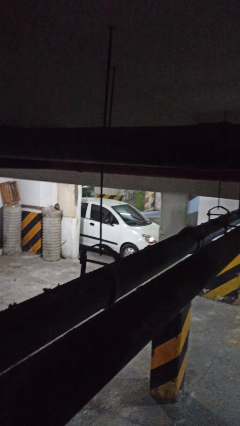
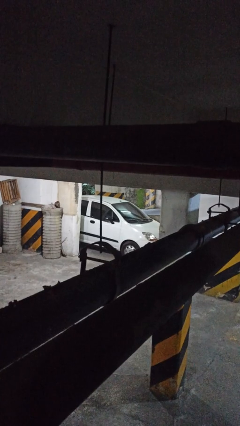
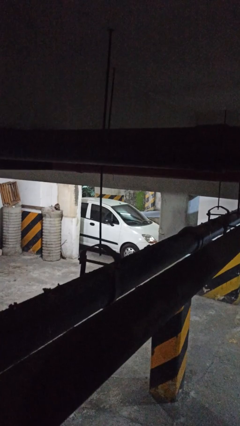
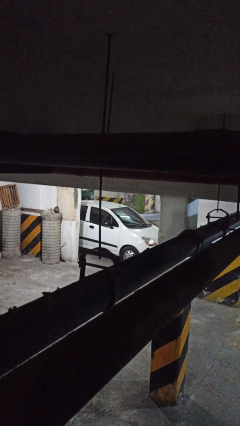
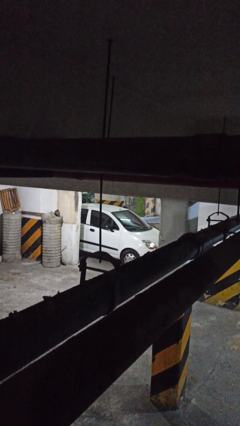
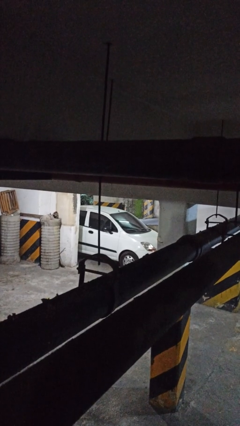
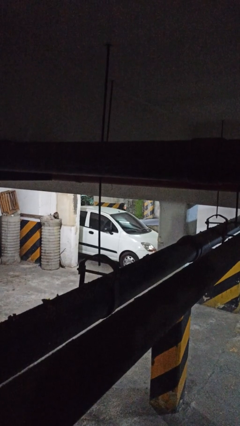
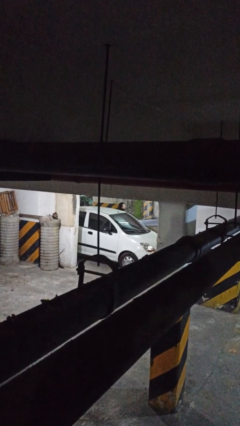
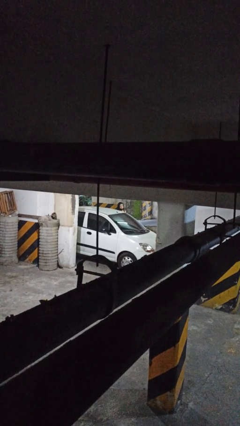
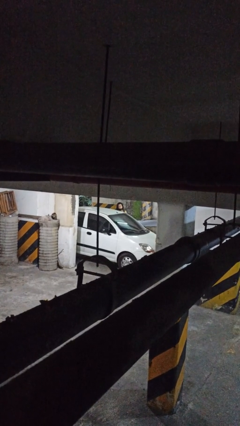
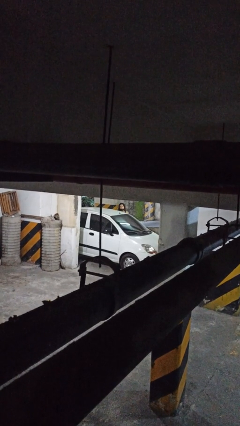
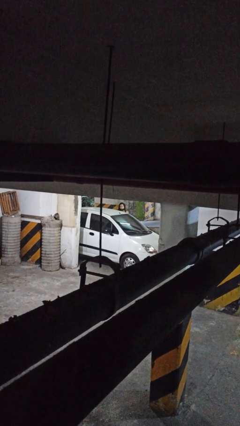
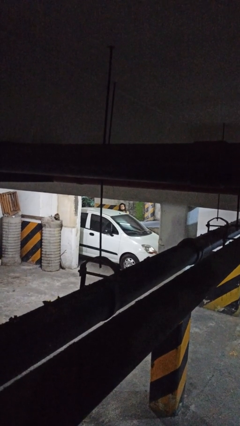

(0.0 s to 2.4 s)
person exits car

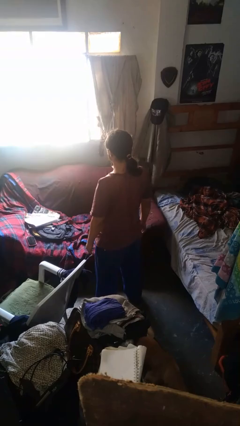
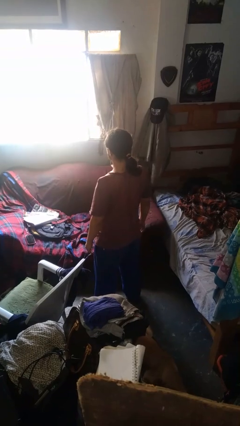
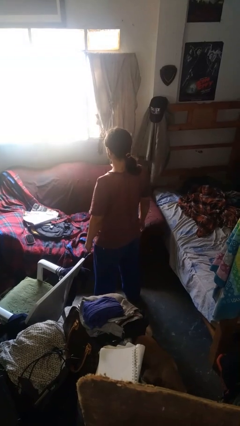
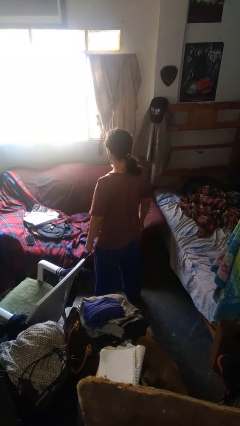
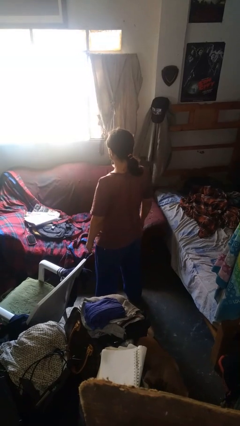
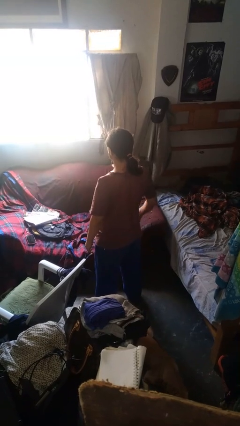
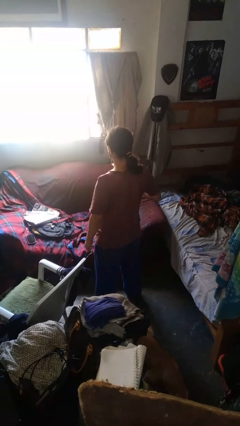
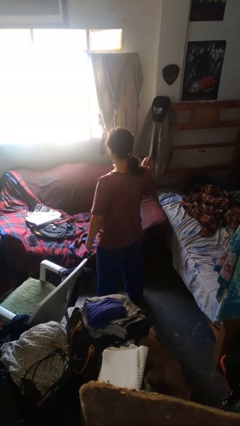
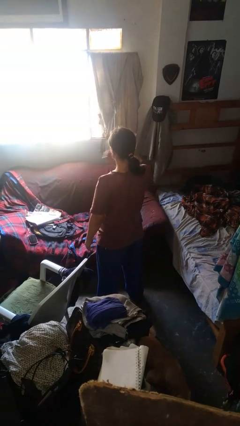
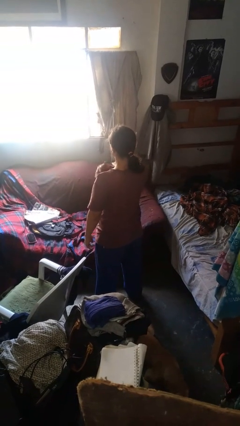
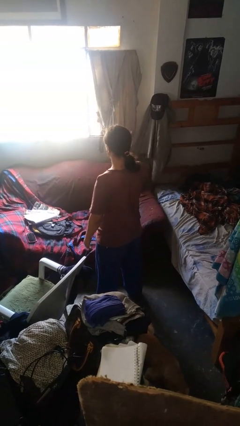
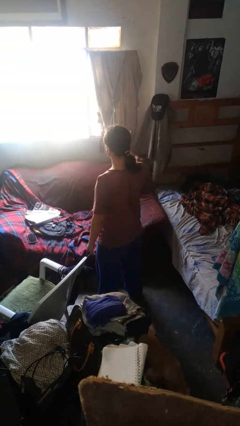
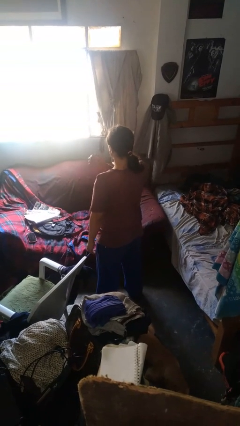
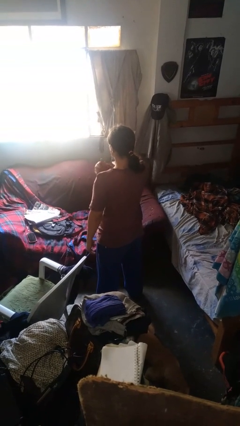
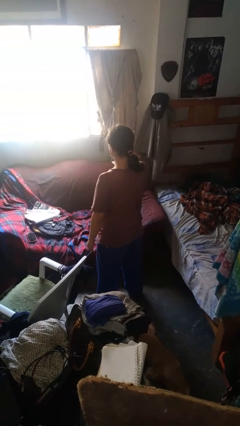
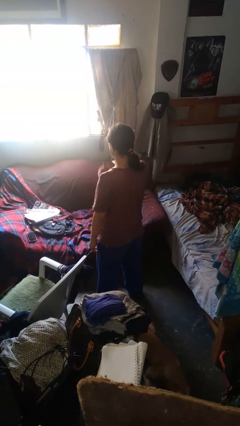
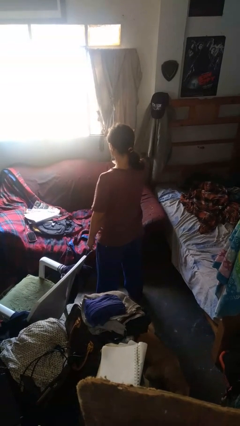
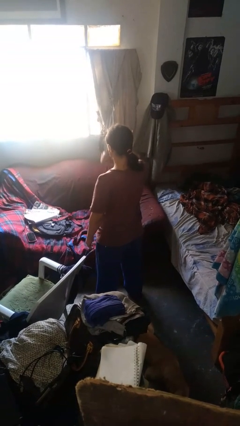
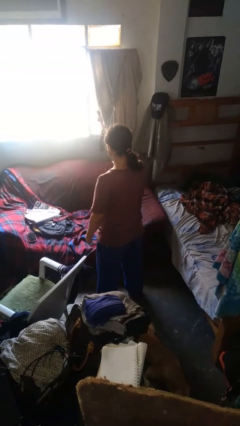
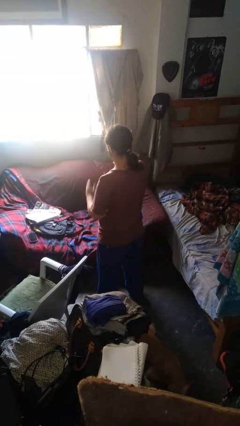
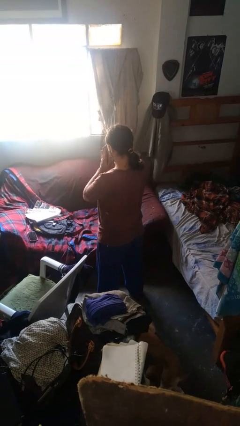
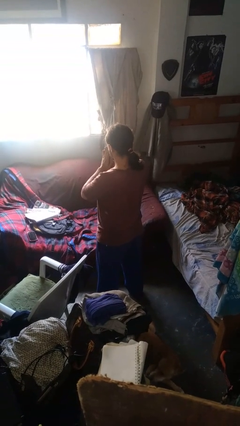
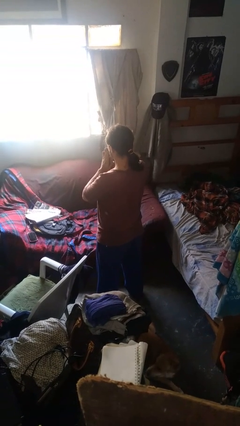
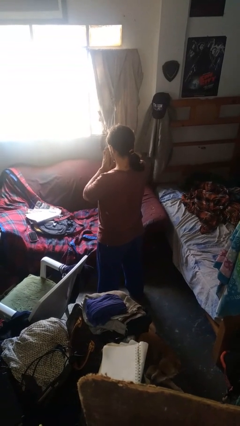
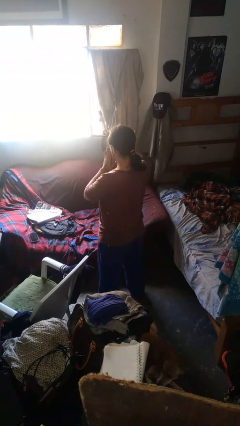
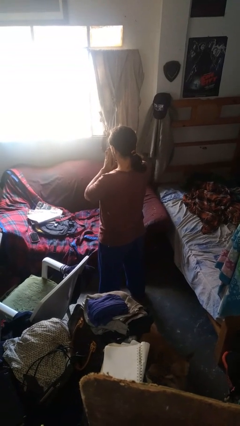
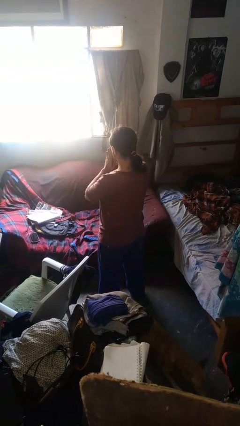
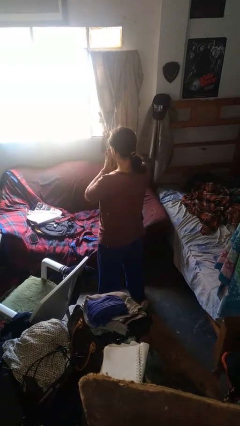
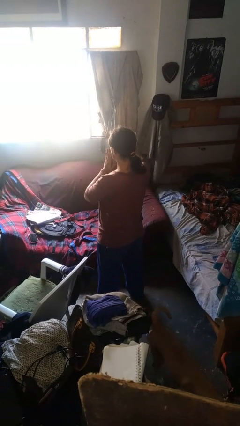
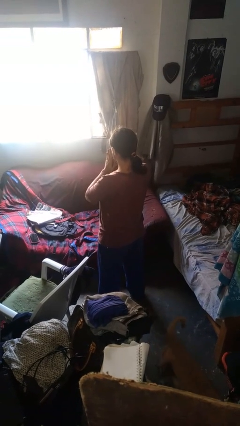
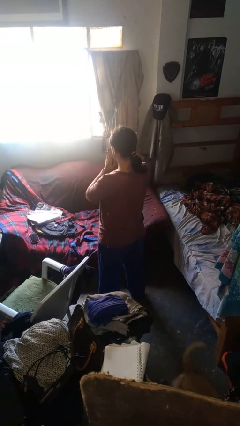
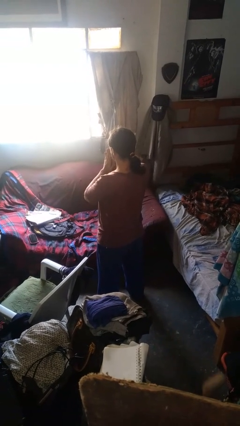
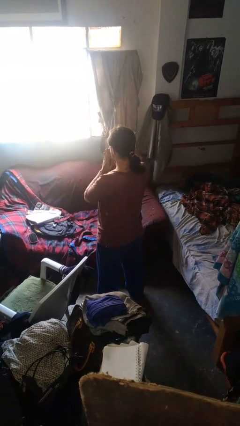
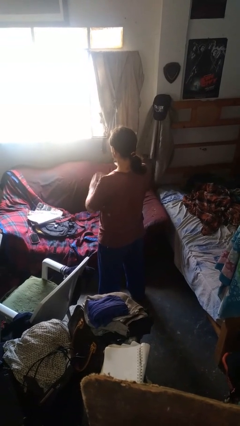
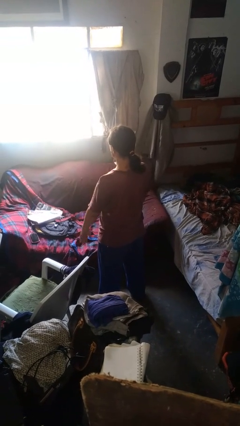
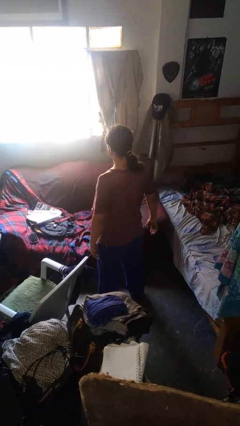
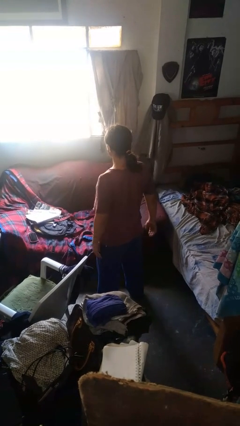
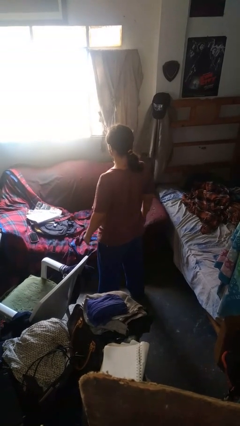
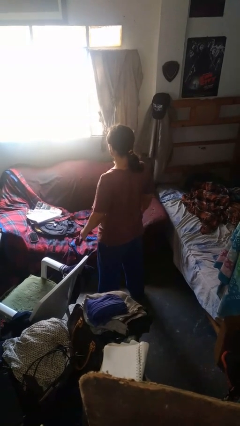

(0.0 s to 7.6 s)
person prays

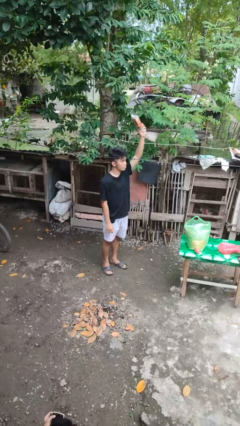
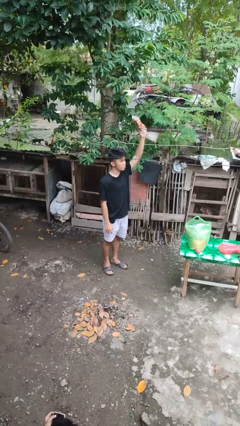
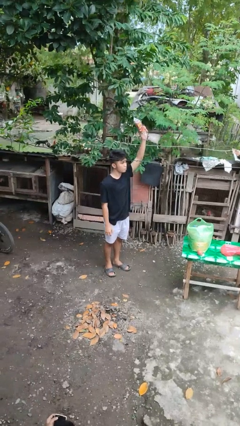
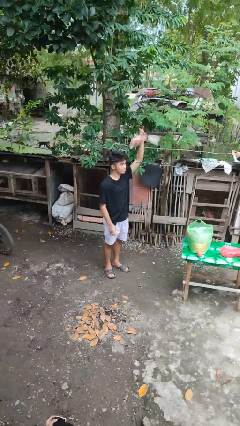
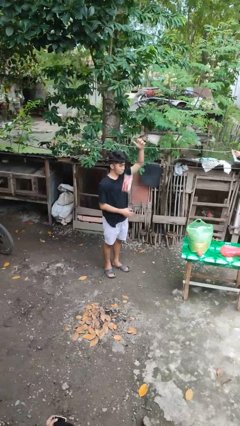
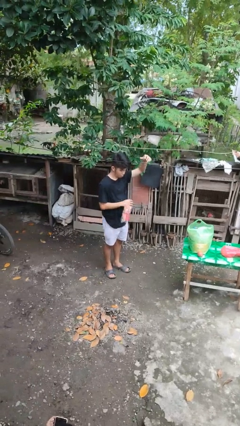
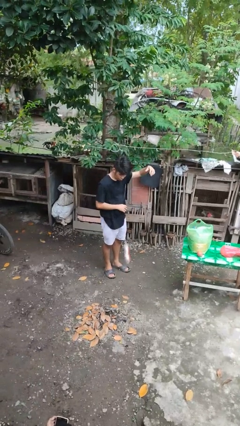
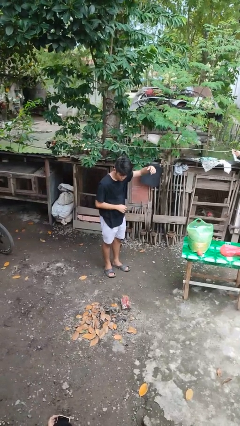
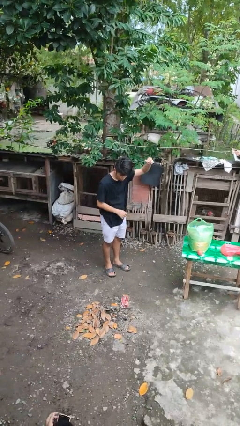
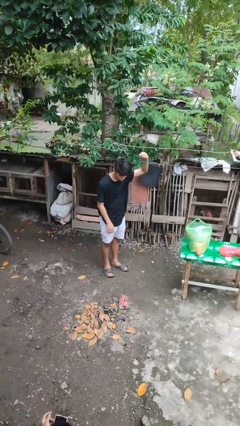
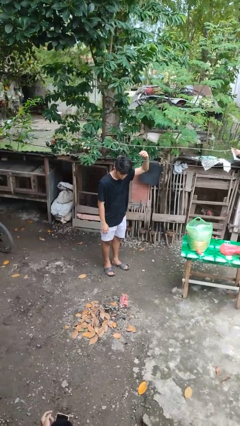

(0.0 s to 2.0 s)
person drops object

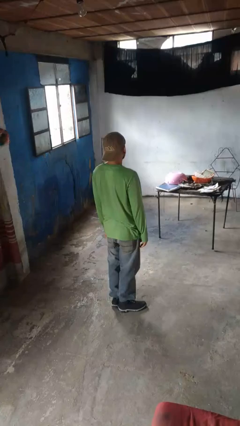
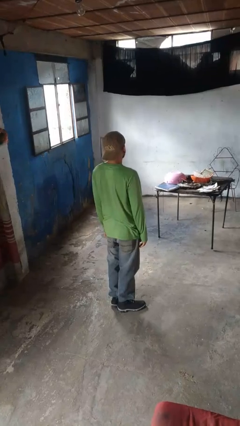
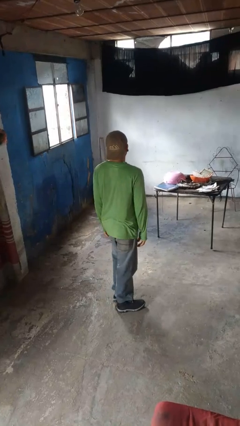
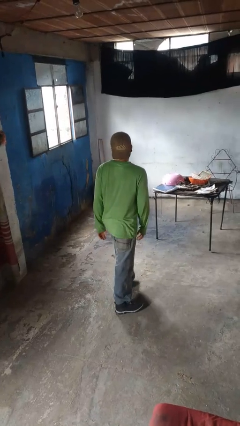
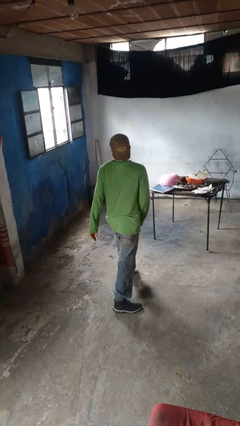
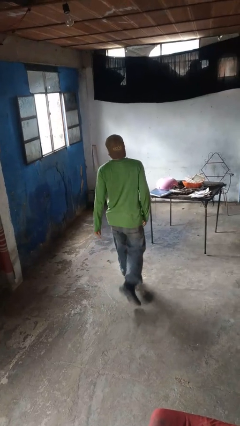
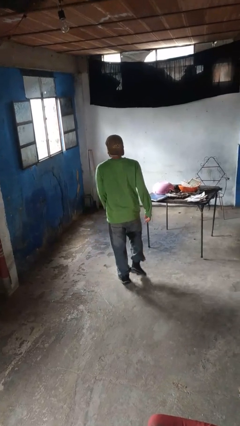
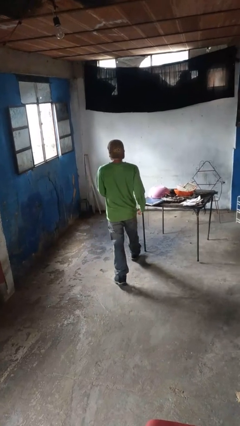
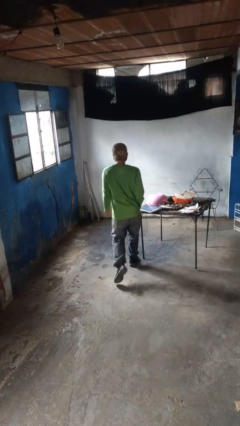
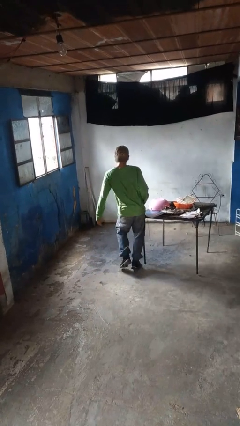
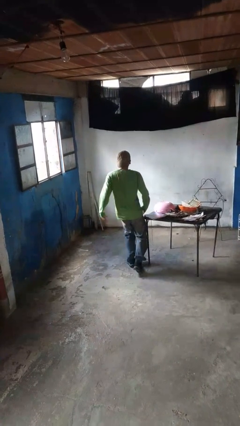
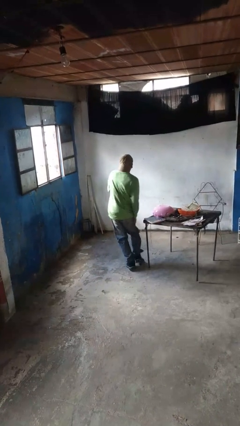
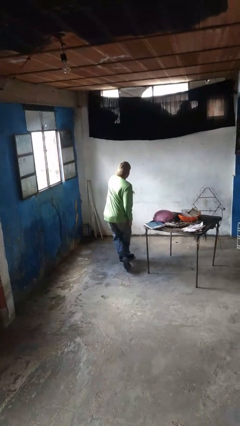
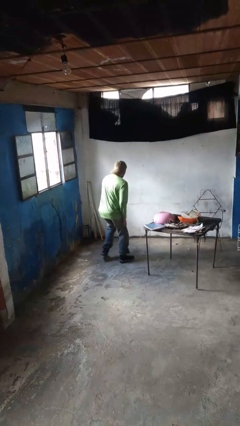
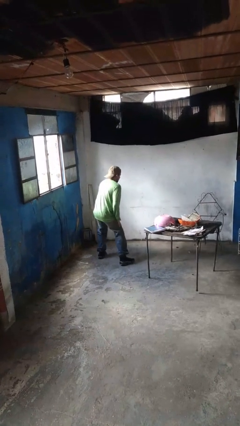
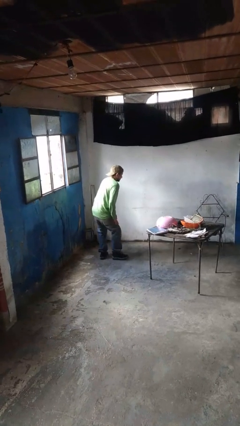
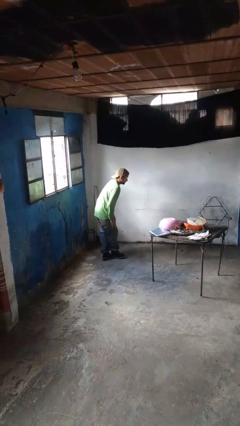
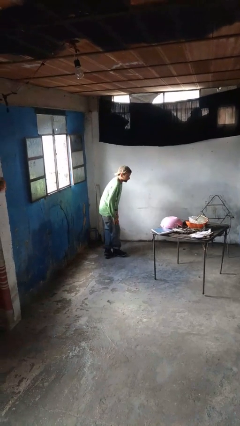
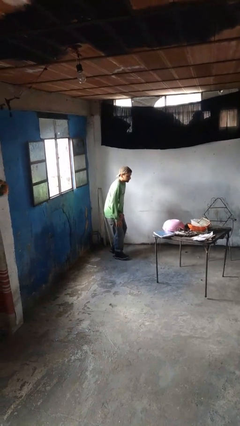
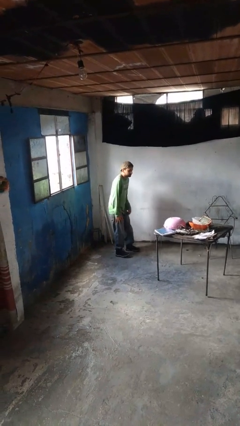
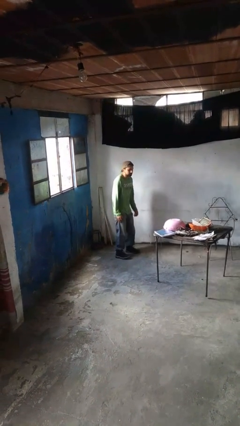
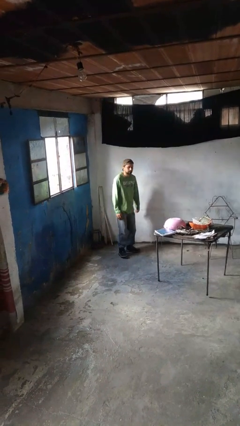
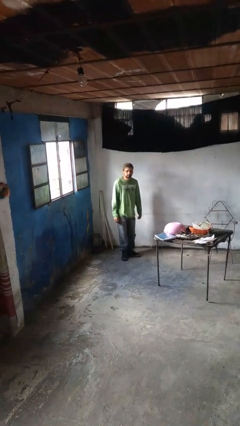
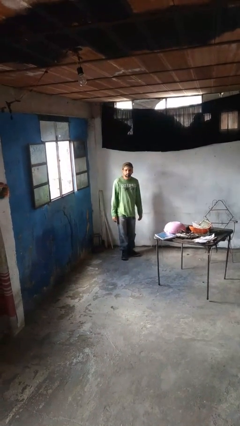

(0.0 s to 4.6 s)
person bumps into table

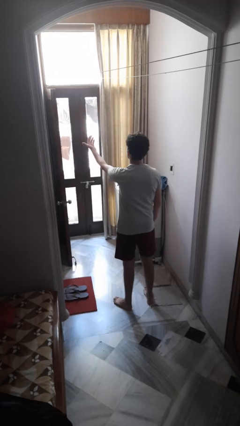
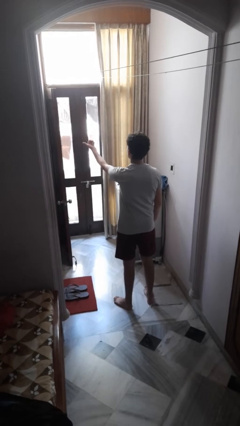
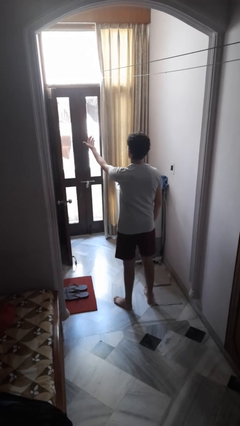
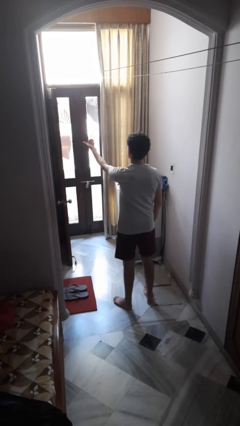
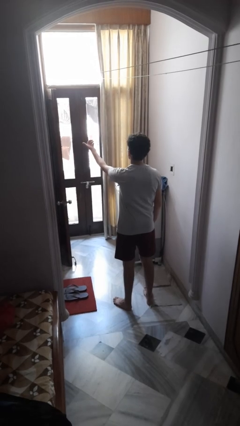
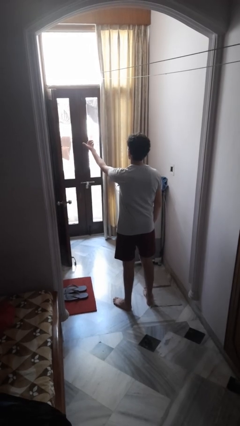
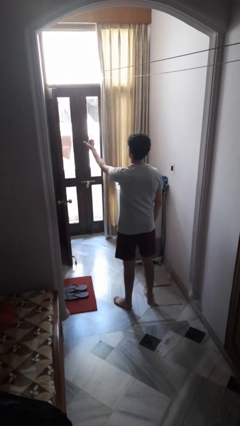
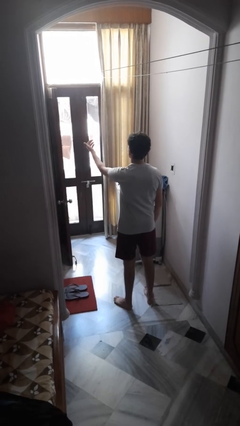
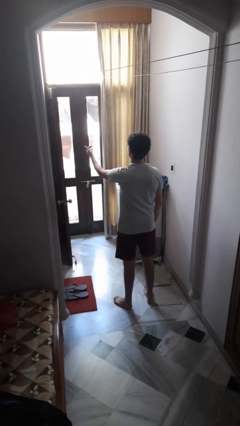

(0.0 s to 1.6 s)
person gestures come here
